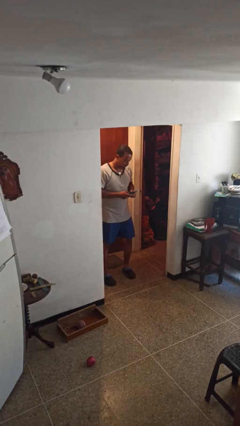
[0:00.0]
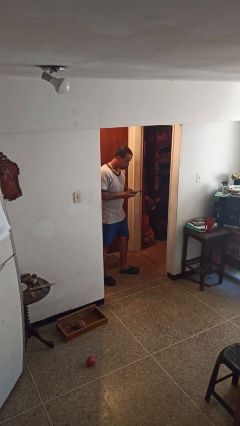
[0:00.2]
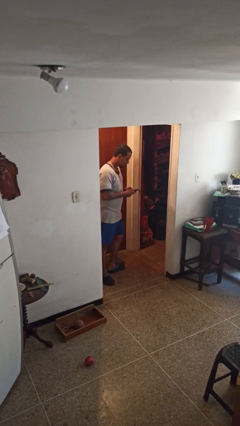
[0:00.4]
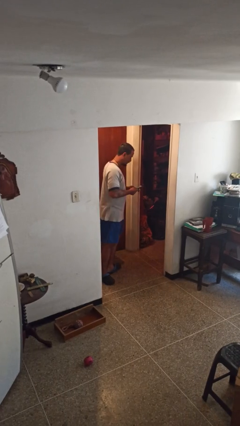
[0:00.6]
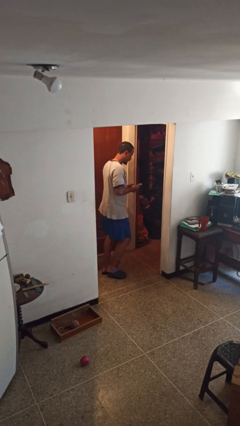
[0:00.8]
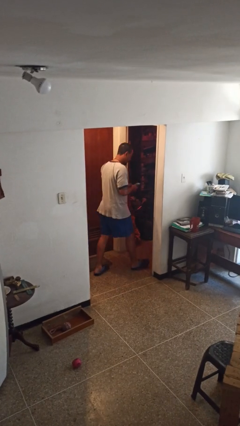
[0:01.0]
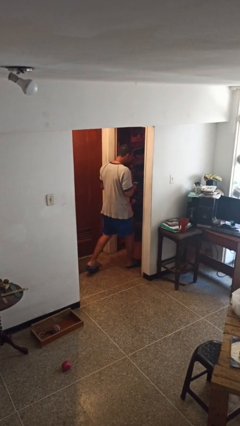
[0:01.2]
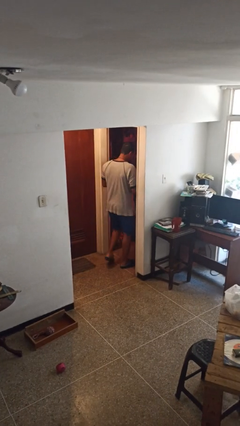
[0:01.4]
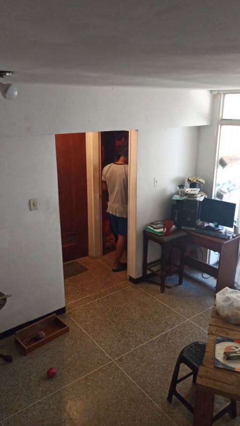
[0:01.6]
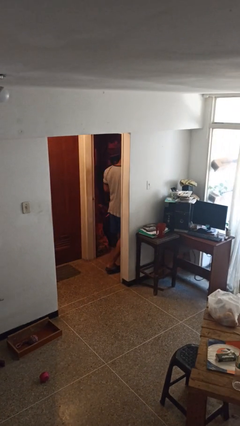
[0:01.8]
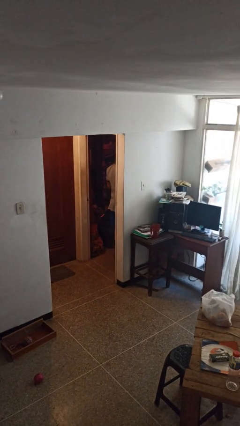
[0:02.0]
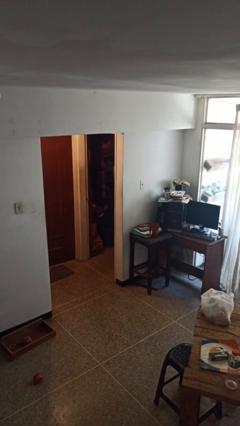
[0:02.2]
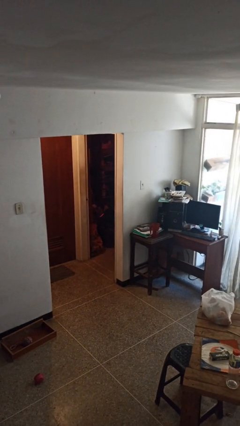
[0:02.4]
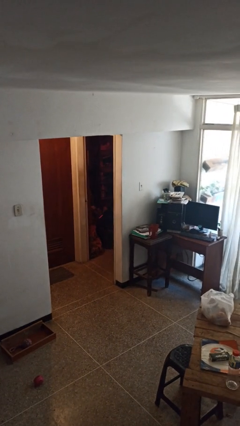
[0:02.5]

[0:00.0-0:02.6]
person exits scene through structure

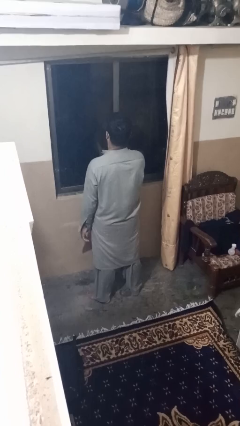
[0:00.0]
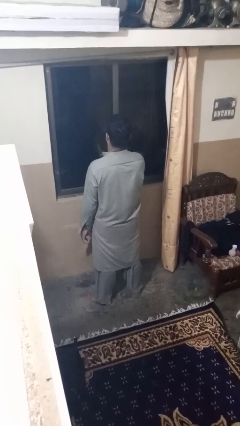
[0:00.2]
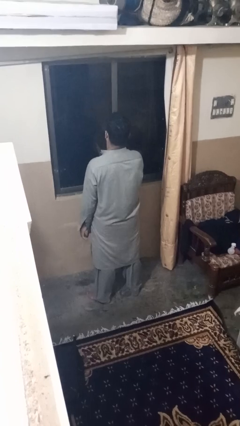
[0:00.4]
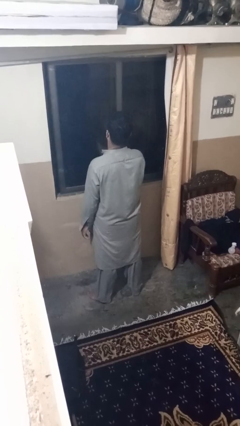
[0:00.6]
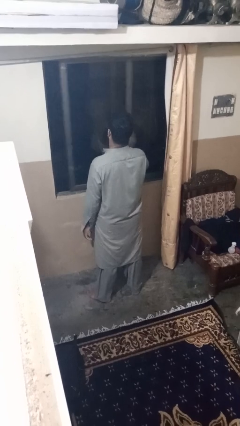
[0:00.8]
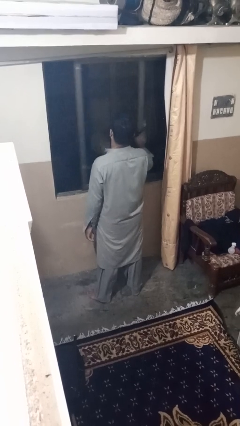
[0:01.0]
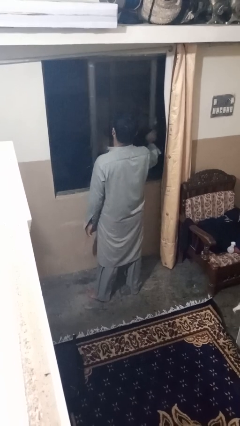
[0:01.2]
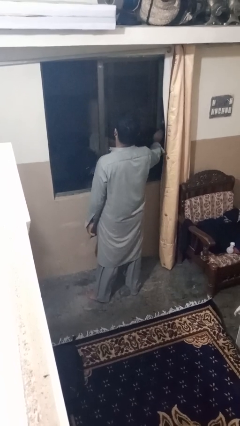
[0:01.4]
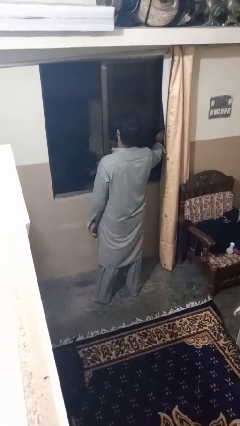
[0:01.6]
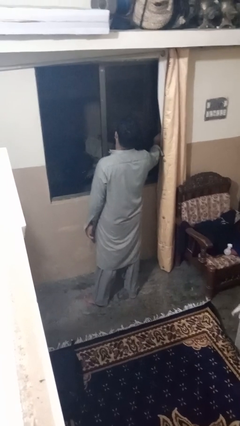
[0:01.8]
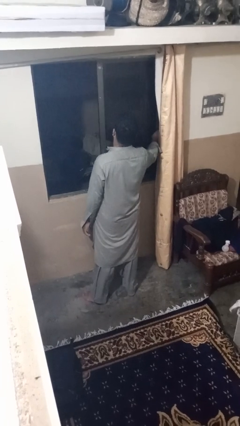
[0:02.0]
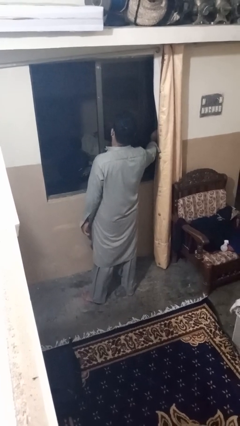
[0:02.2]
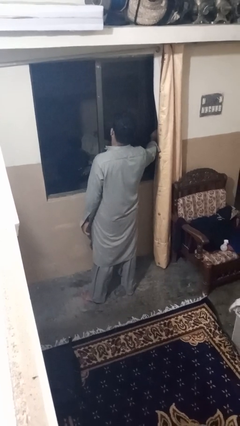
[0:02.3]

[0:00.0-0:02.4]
person opens home window

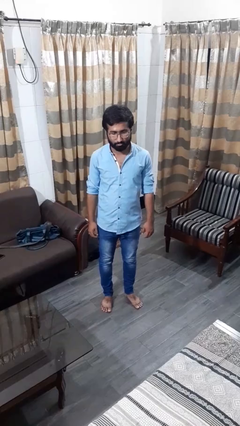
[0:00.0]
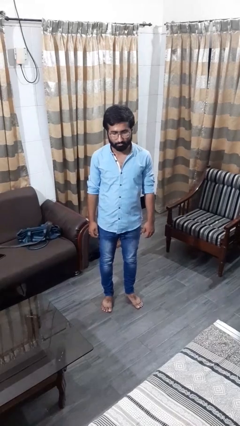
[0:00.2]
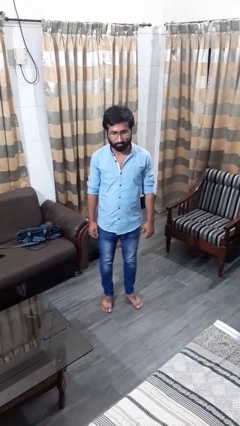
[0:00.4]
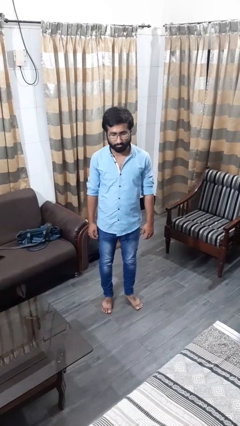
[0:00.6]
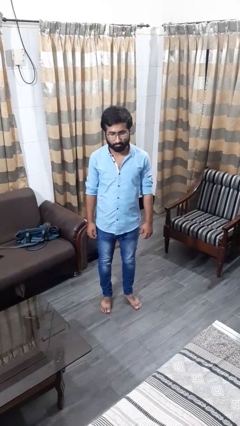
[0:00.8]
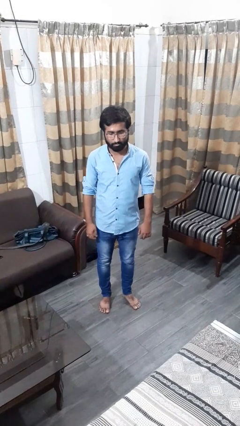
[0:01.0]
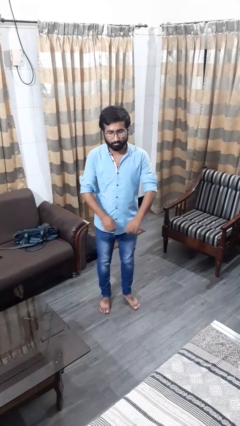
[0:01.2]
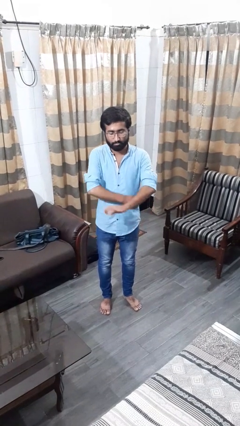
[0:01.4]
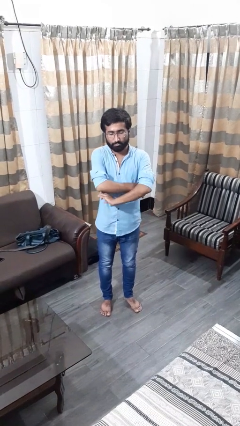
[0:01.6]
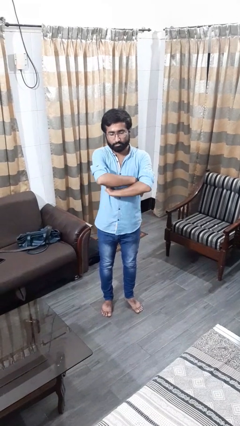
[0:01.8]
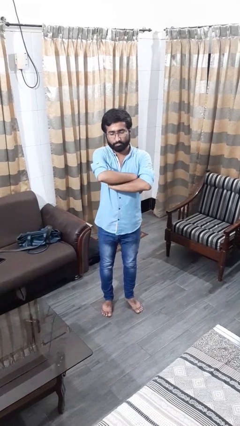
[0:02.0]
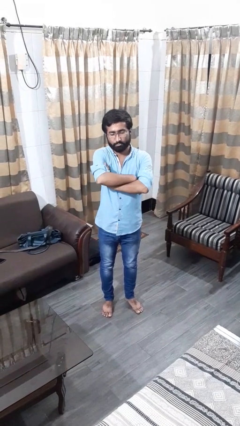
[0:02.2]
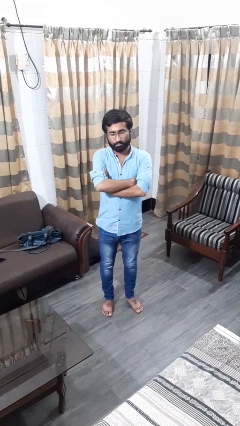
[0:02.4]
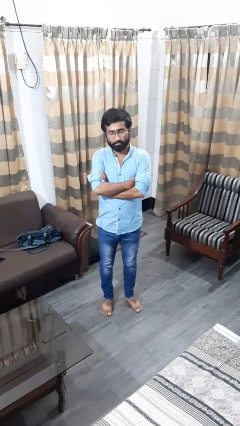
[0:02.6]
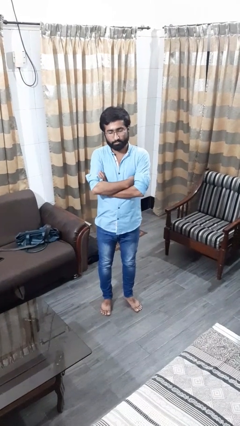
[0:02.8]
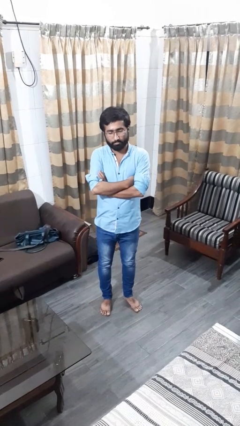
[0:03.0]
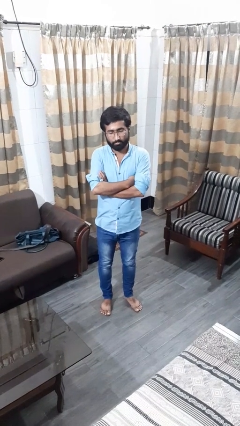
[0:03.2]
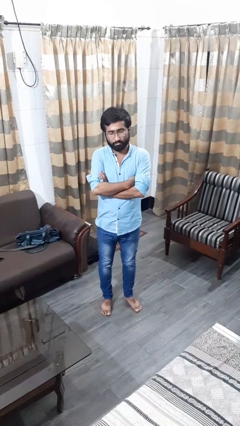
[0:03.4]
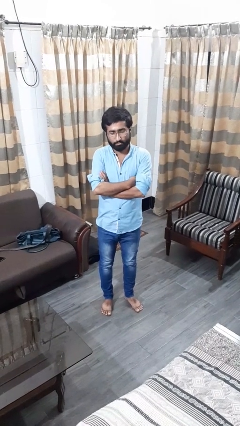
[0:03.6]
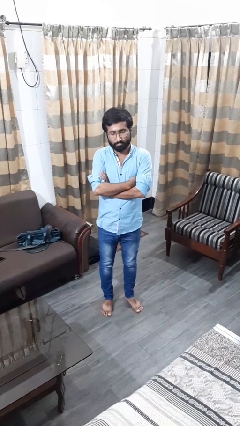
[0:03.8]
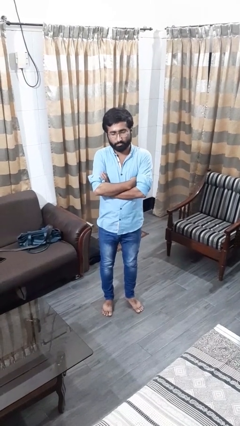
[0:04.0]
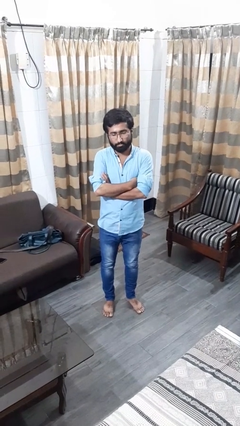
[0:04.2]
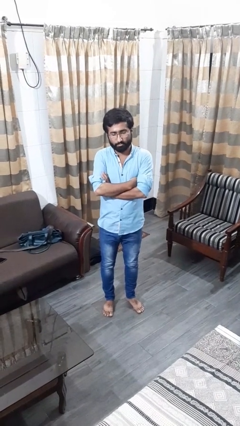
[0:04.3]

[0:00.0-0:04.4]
person crosses arms

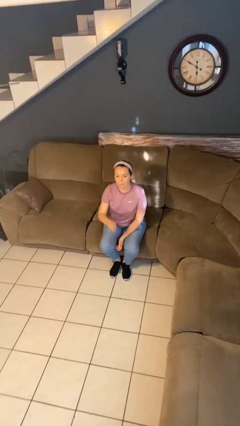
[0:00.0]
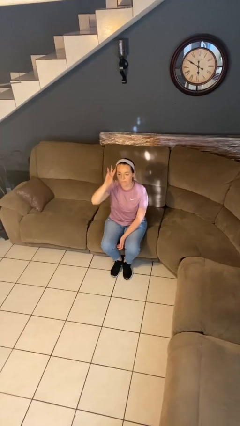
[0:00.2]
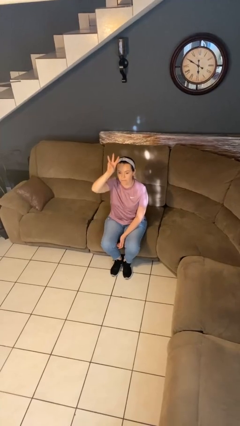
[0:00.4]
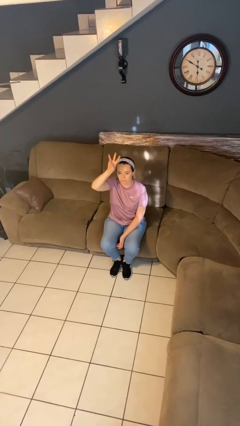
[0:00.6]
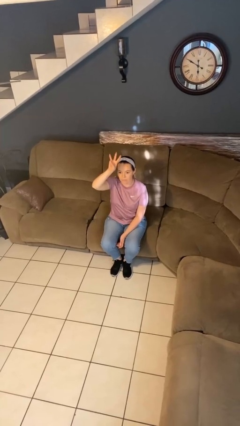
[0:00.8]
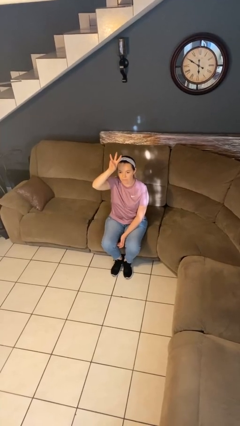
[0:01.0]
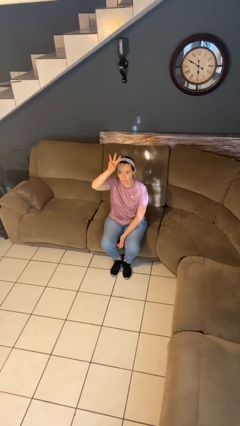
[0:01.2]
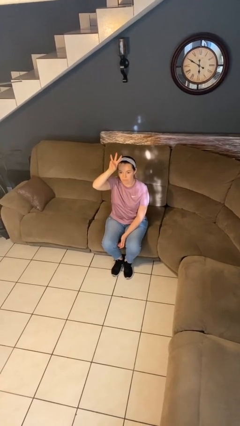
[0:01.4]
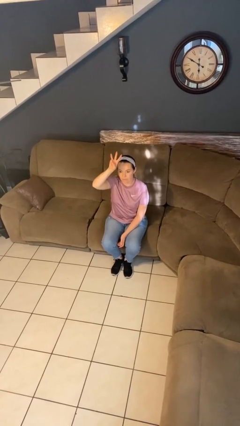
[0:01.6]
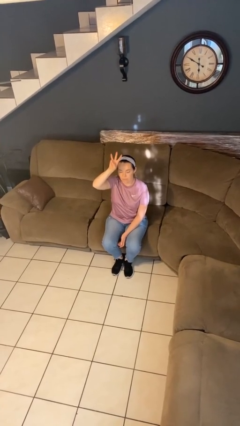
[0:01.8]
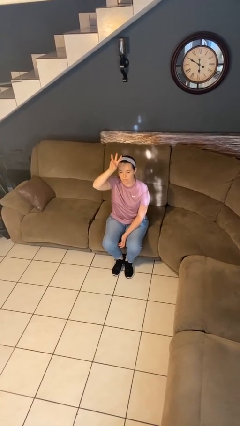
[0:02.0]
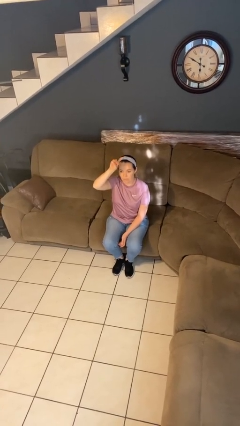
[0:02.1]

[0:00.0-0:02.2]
person gestures number three

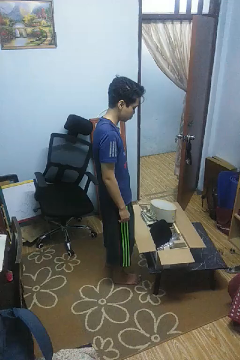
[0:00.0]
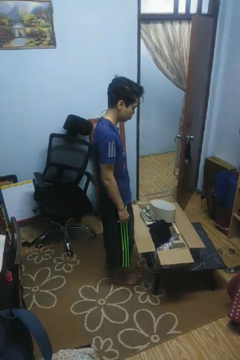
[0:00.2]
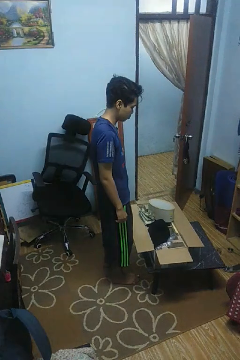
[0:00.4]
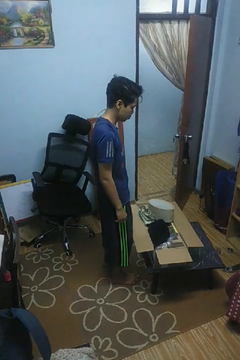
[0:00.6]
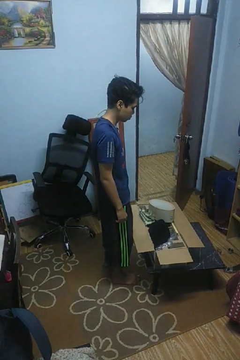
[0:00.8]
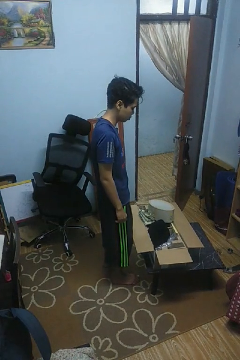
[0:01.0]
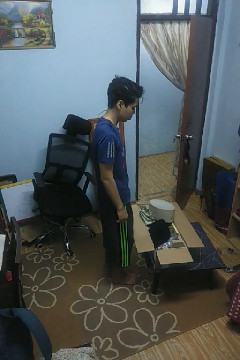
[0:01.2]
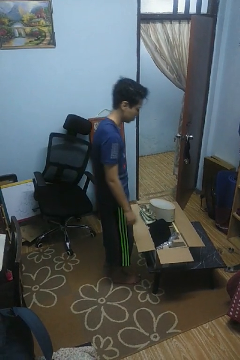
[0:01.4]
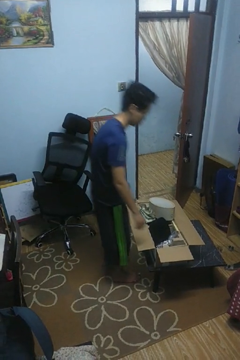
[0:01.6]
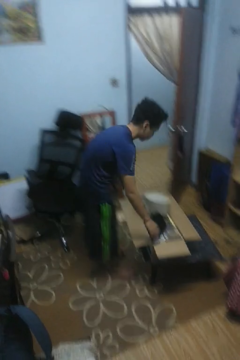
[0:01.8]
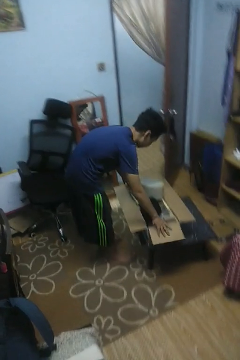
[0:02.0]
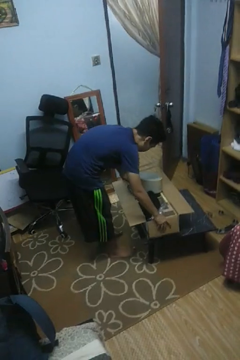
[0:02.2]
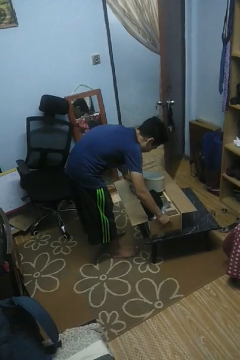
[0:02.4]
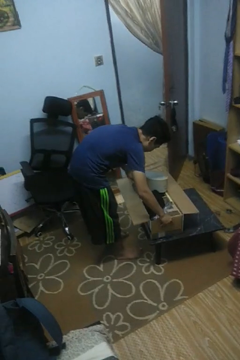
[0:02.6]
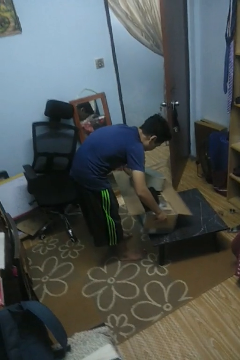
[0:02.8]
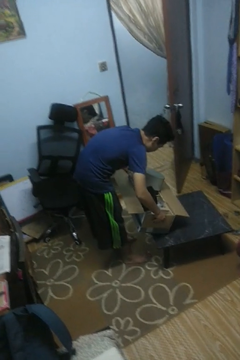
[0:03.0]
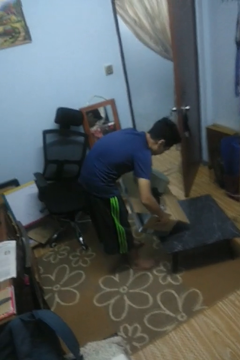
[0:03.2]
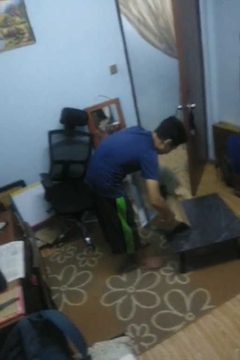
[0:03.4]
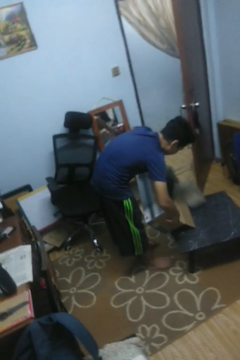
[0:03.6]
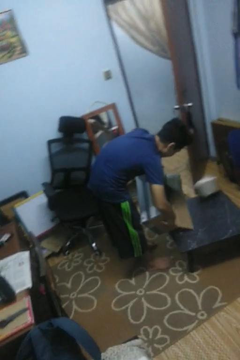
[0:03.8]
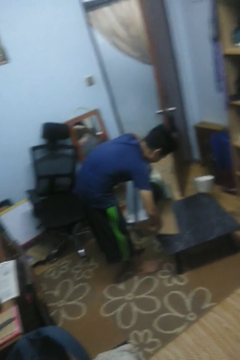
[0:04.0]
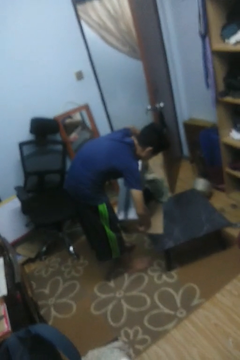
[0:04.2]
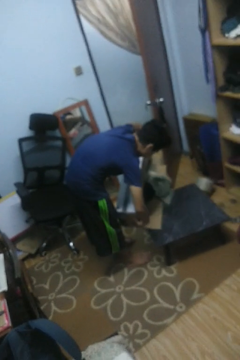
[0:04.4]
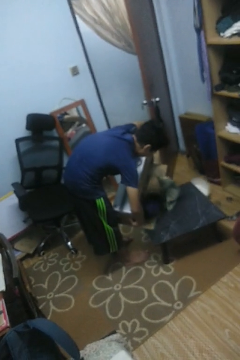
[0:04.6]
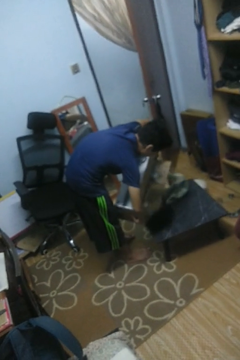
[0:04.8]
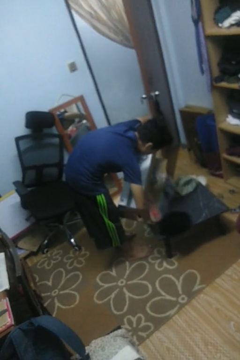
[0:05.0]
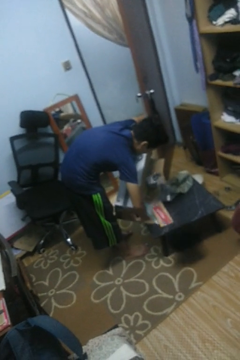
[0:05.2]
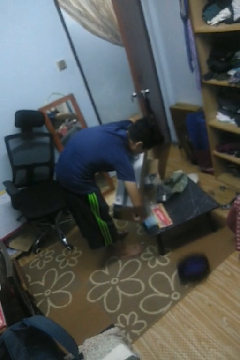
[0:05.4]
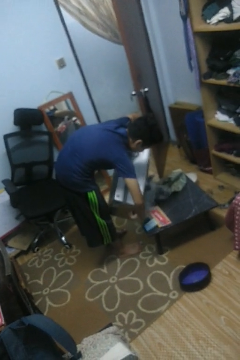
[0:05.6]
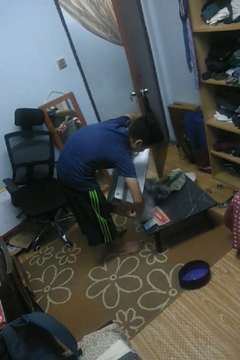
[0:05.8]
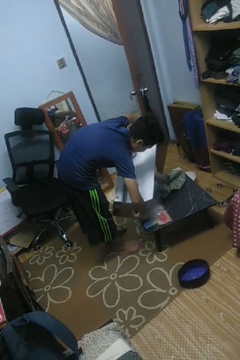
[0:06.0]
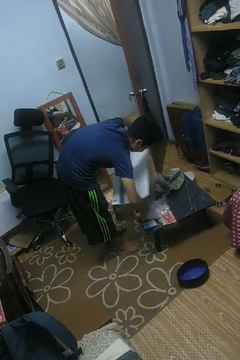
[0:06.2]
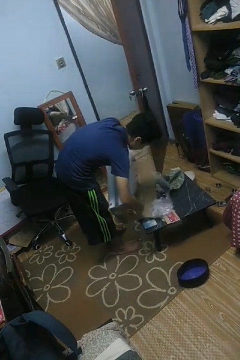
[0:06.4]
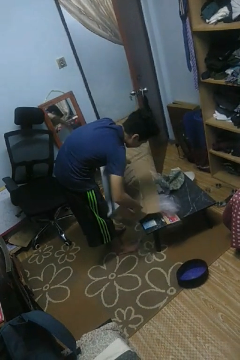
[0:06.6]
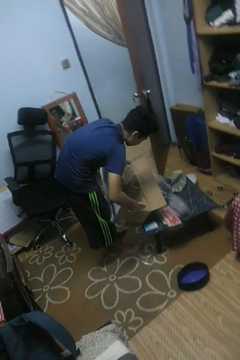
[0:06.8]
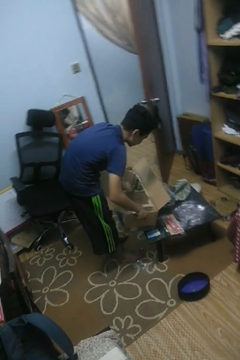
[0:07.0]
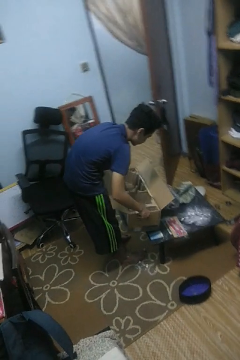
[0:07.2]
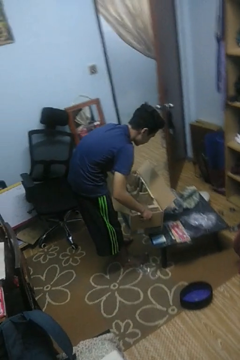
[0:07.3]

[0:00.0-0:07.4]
person unloads box onto table
